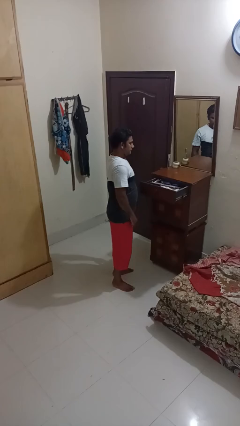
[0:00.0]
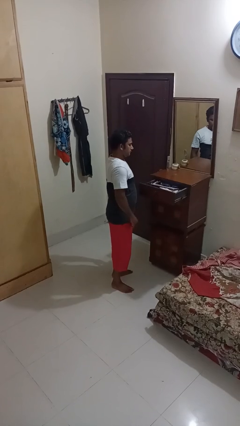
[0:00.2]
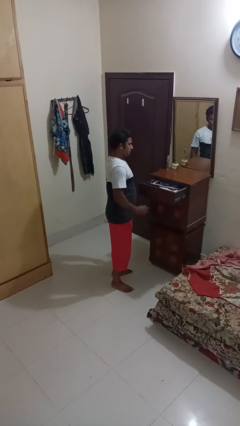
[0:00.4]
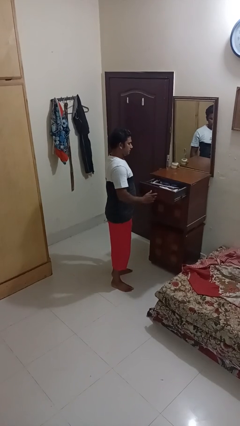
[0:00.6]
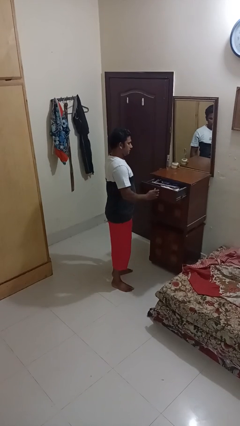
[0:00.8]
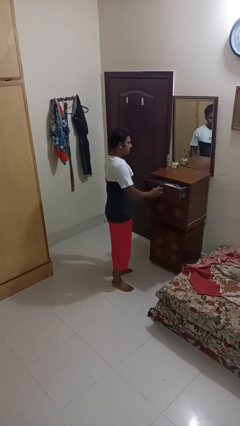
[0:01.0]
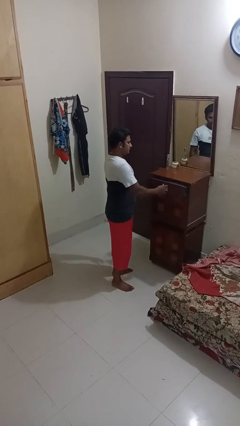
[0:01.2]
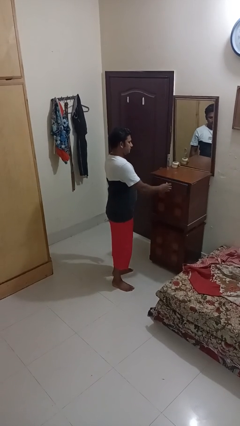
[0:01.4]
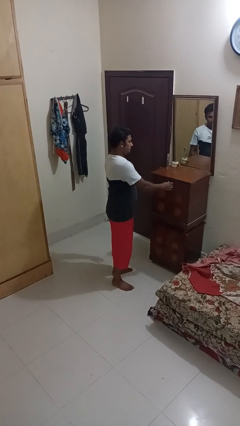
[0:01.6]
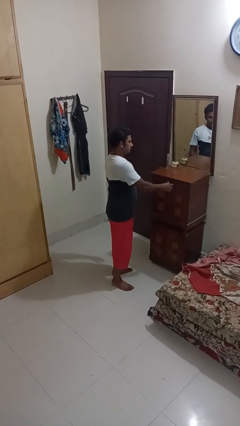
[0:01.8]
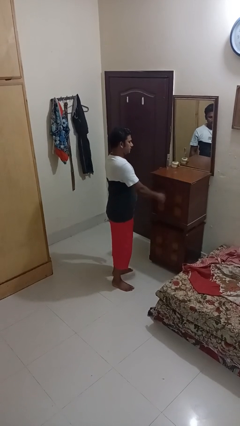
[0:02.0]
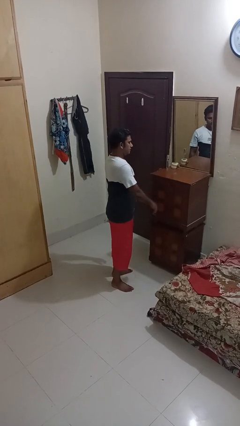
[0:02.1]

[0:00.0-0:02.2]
person closes dresser drawer

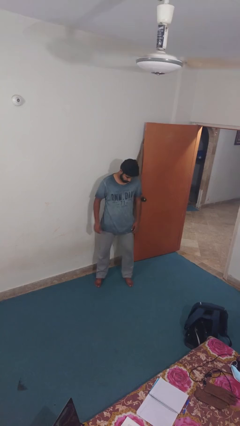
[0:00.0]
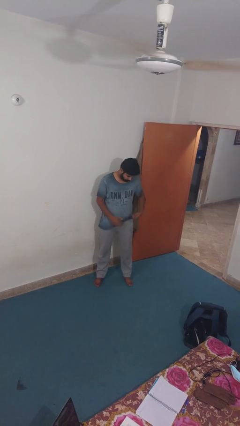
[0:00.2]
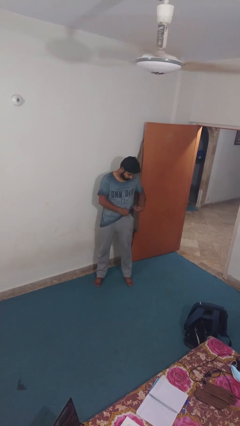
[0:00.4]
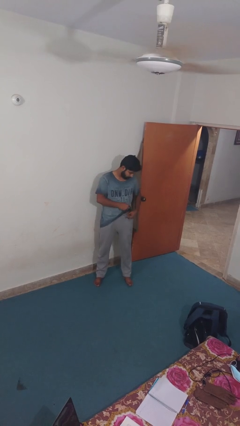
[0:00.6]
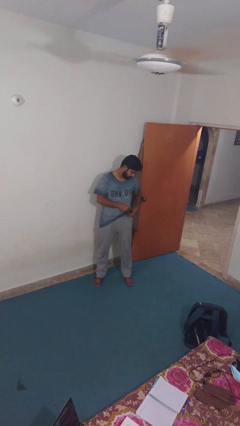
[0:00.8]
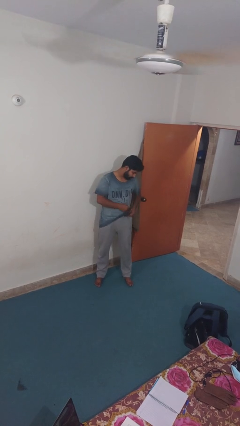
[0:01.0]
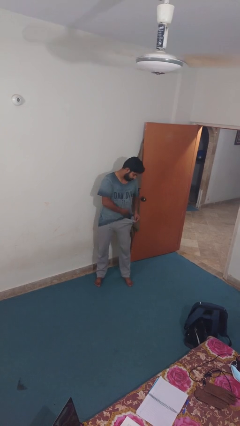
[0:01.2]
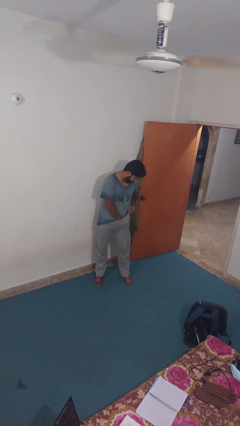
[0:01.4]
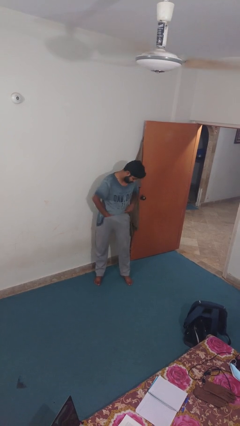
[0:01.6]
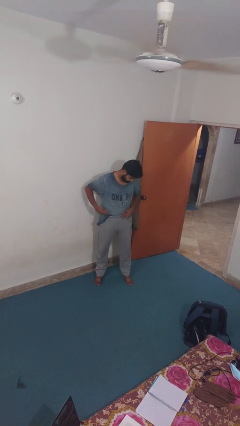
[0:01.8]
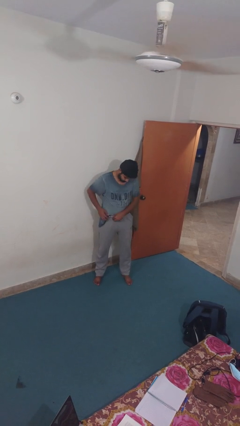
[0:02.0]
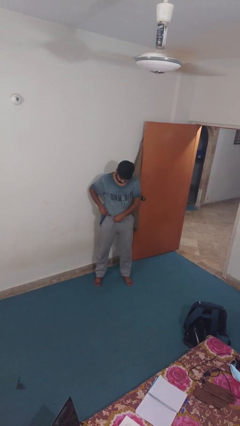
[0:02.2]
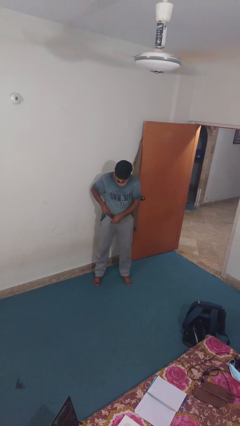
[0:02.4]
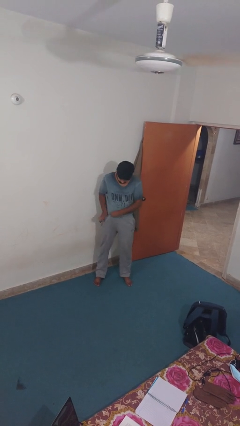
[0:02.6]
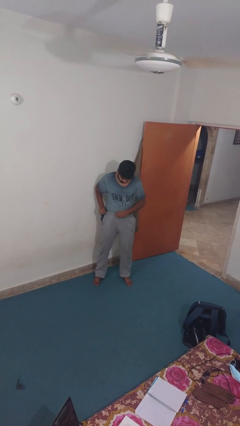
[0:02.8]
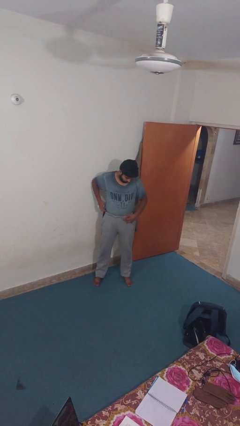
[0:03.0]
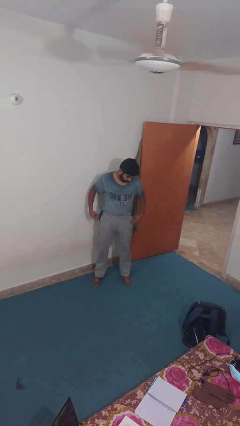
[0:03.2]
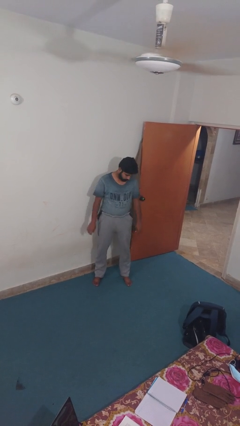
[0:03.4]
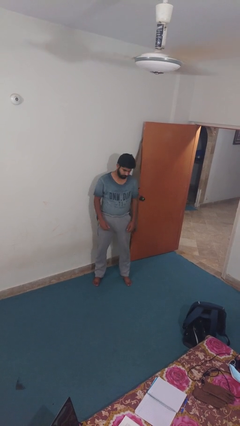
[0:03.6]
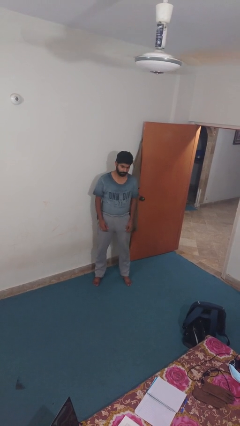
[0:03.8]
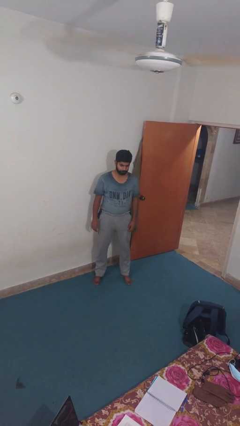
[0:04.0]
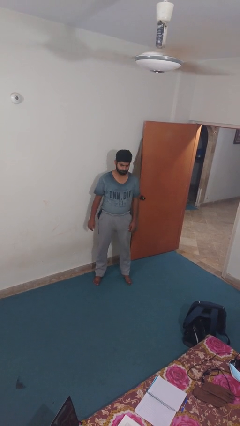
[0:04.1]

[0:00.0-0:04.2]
person tucks in shirt

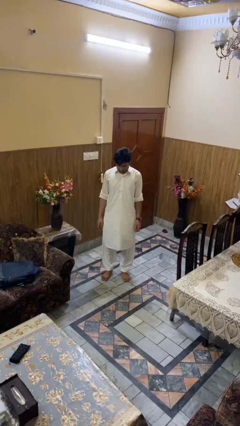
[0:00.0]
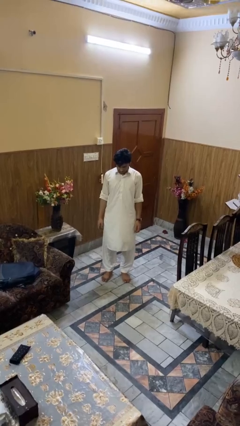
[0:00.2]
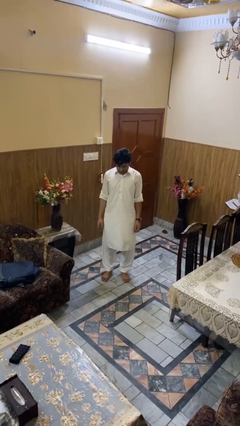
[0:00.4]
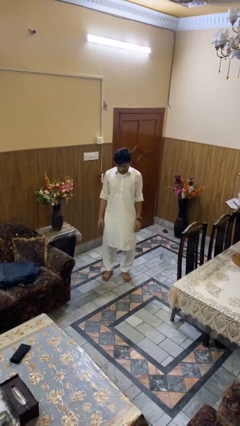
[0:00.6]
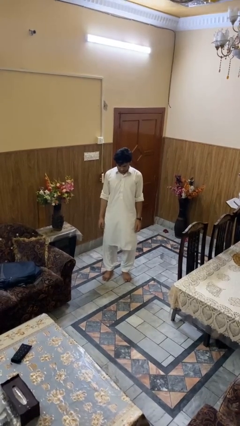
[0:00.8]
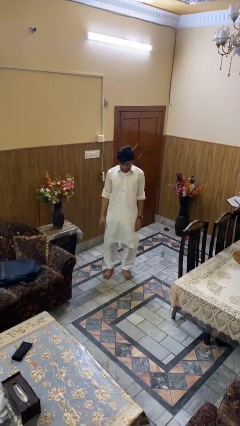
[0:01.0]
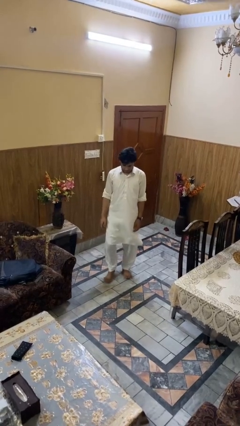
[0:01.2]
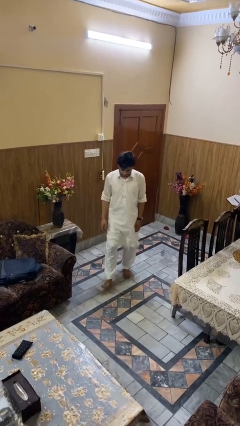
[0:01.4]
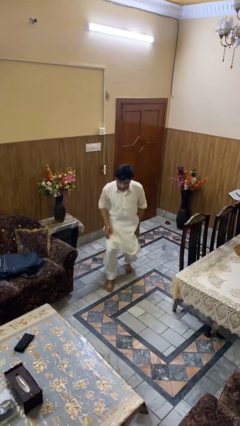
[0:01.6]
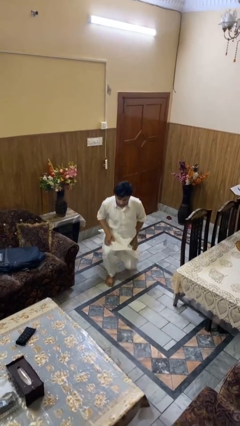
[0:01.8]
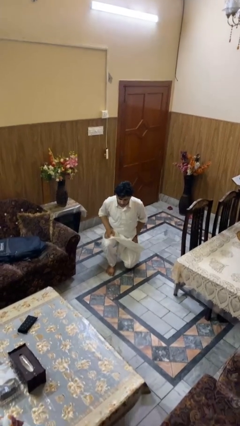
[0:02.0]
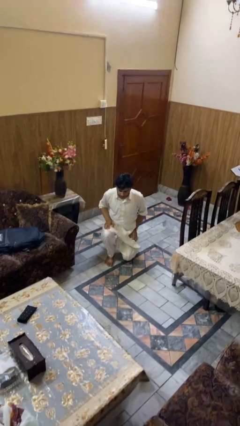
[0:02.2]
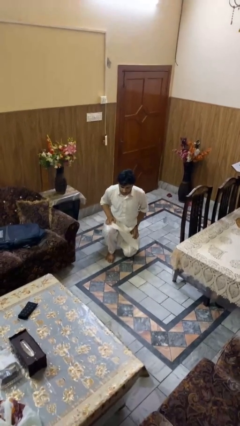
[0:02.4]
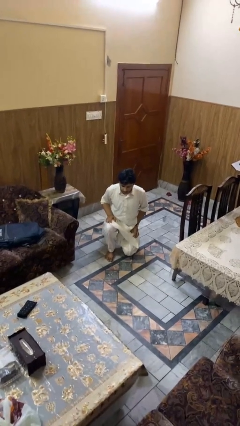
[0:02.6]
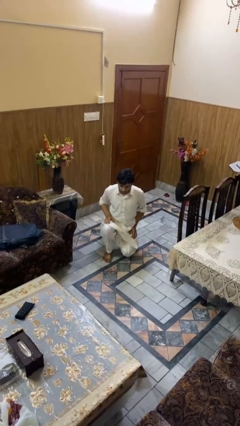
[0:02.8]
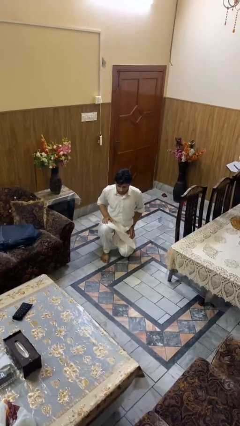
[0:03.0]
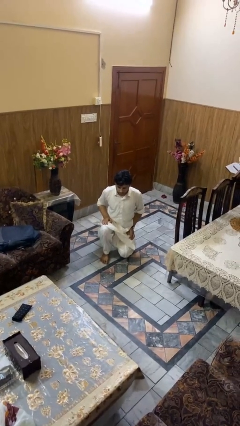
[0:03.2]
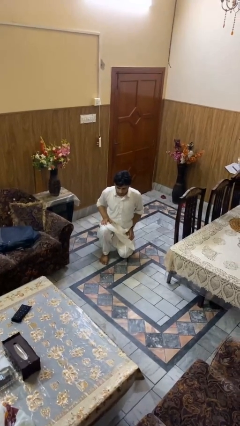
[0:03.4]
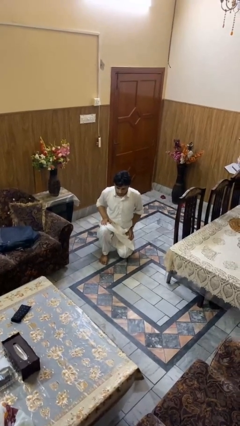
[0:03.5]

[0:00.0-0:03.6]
person kneels

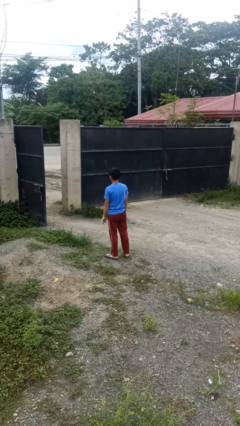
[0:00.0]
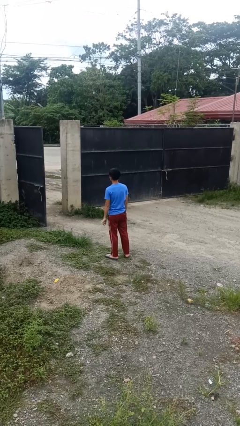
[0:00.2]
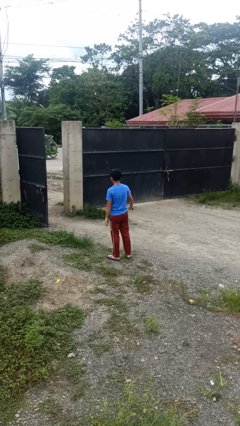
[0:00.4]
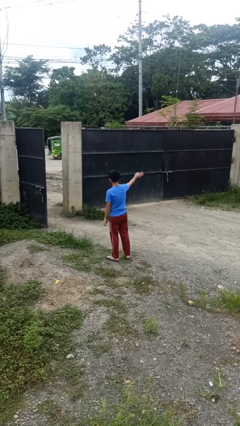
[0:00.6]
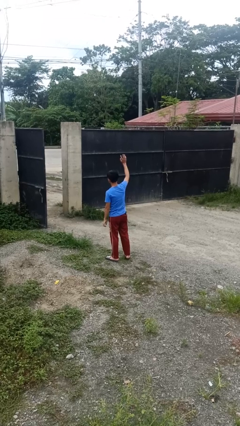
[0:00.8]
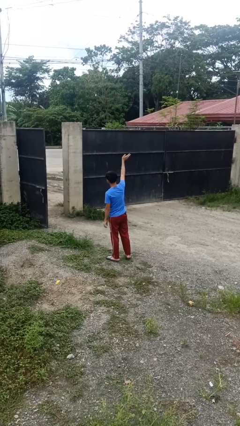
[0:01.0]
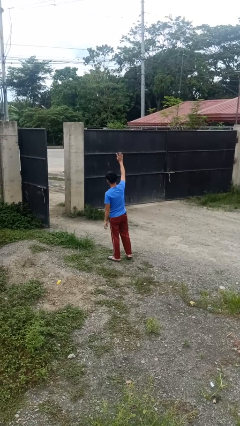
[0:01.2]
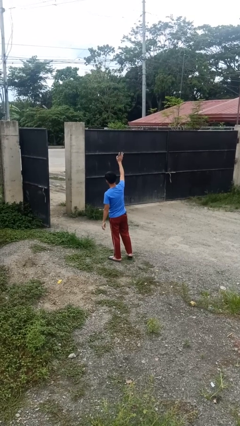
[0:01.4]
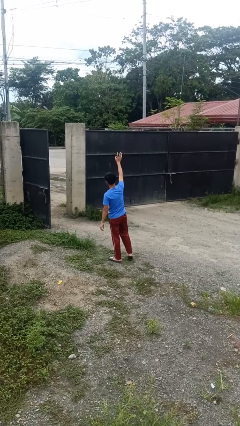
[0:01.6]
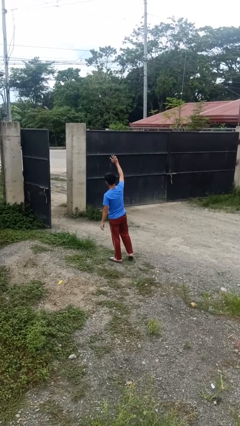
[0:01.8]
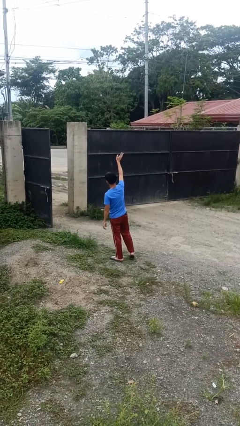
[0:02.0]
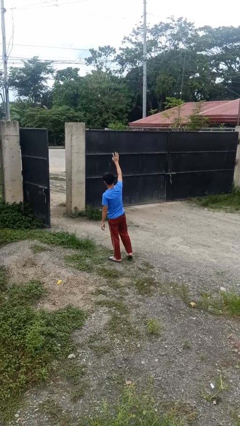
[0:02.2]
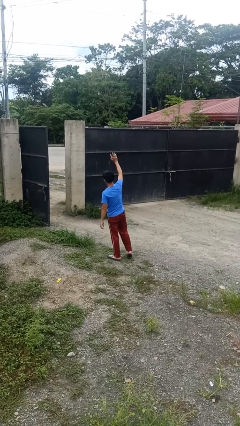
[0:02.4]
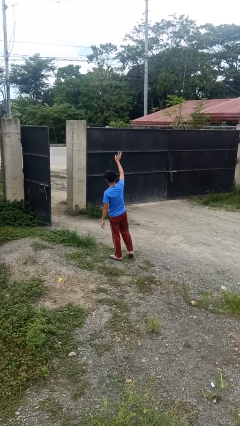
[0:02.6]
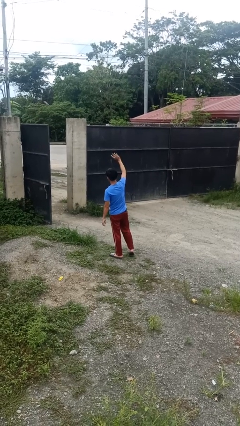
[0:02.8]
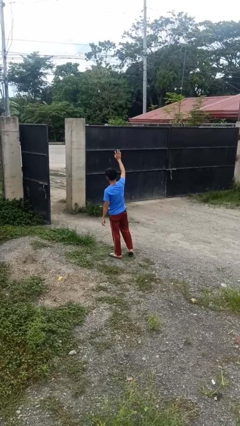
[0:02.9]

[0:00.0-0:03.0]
person waves at person

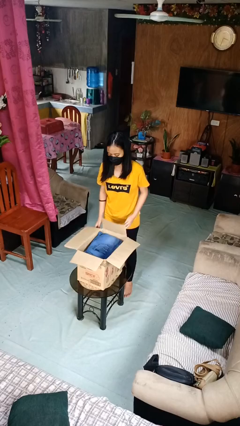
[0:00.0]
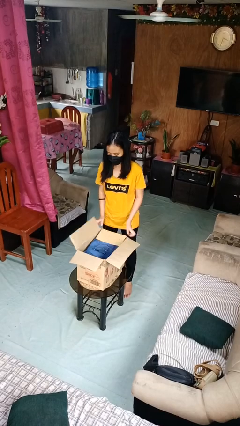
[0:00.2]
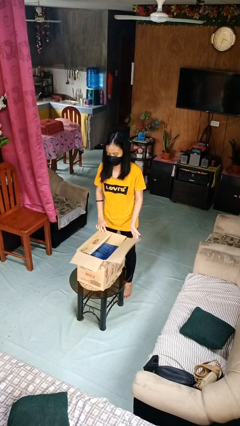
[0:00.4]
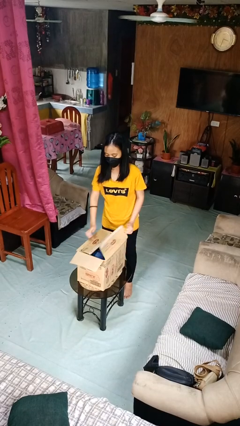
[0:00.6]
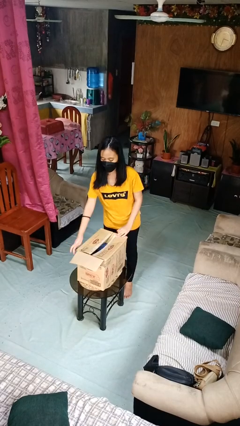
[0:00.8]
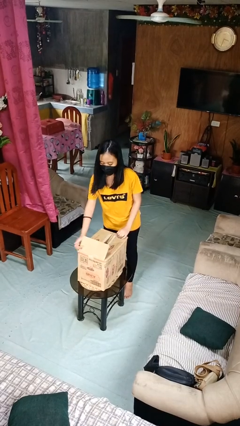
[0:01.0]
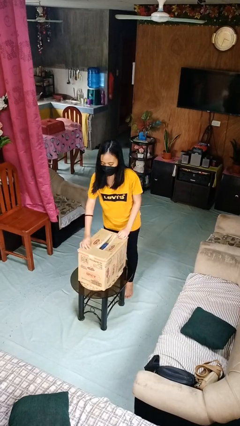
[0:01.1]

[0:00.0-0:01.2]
person closes box

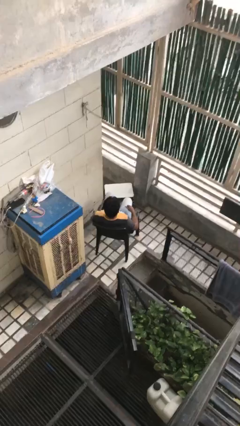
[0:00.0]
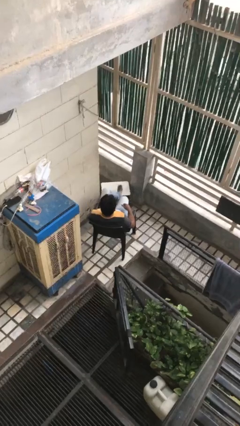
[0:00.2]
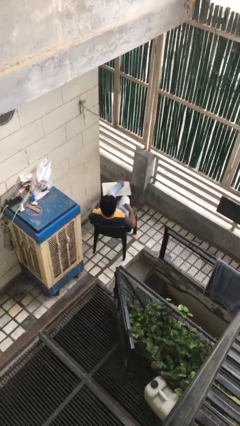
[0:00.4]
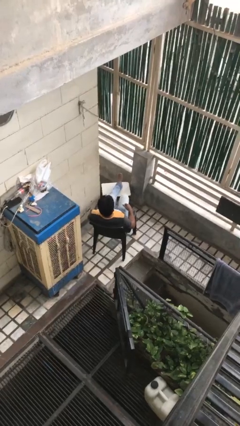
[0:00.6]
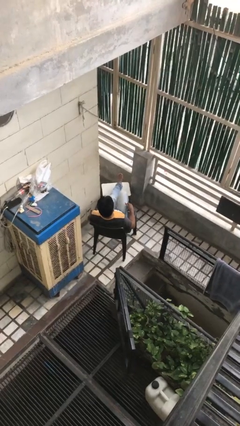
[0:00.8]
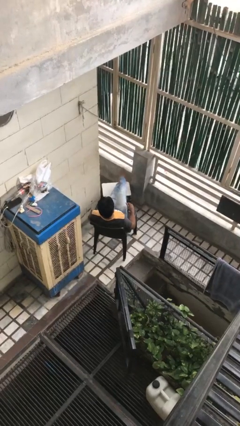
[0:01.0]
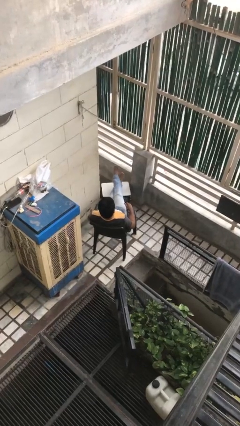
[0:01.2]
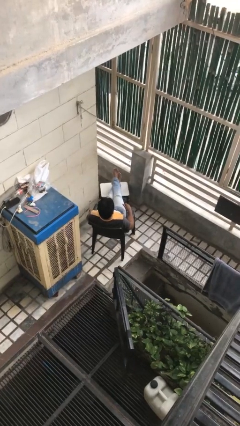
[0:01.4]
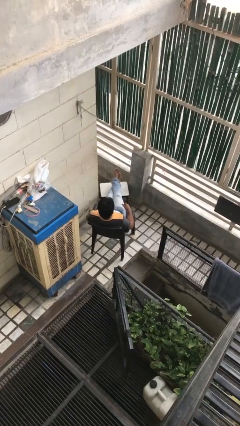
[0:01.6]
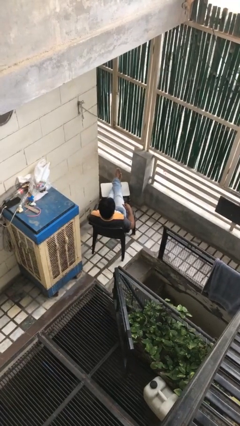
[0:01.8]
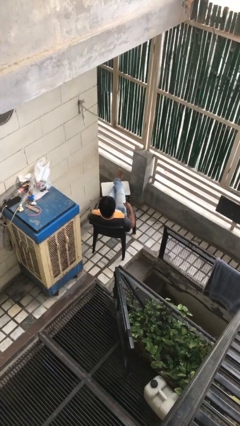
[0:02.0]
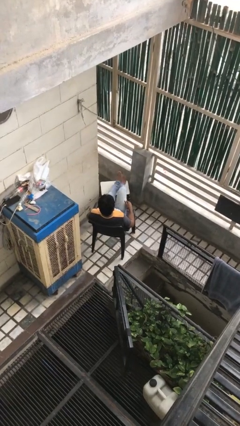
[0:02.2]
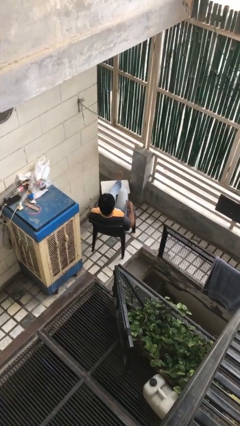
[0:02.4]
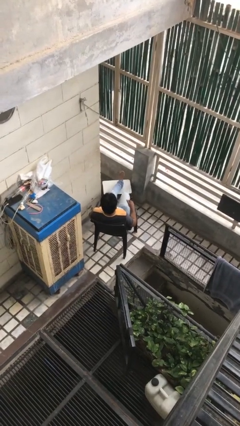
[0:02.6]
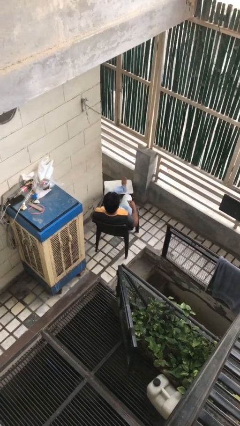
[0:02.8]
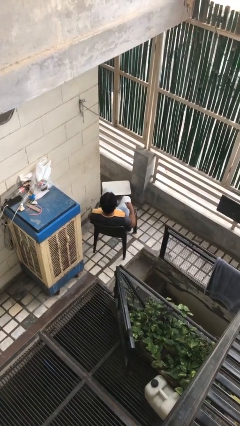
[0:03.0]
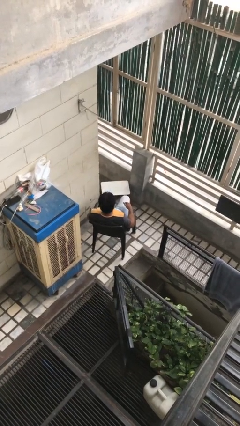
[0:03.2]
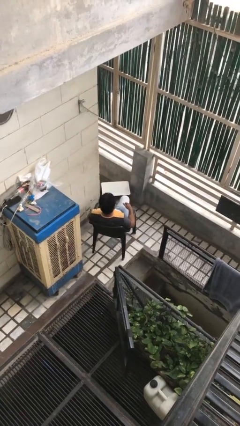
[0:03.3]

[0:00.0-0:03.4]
person puts feet up
